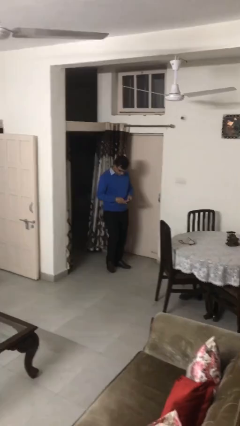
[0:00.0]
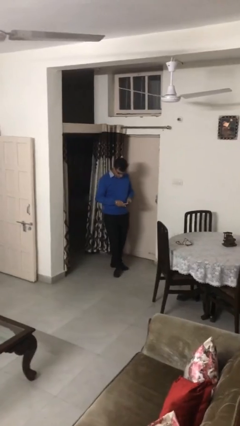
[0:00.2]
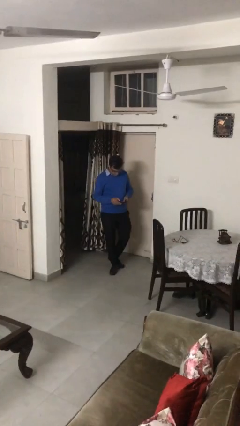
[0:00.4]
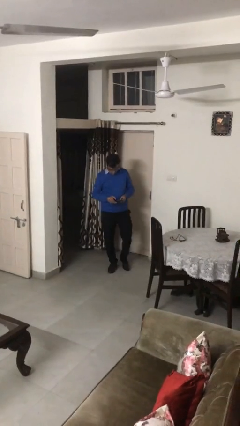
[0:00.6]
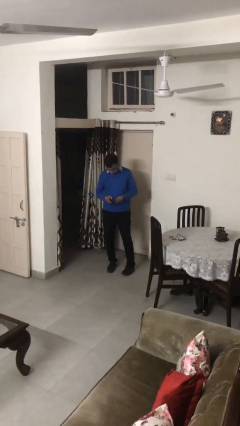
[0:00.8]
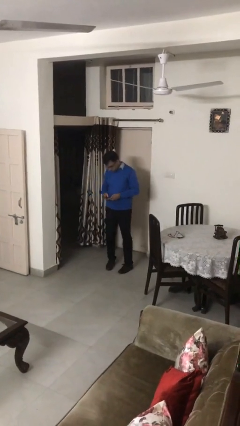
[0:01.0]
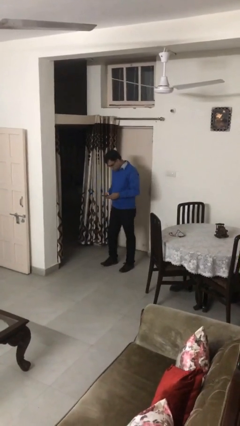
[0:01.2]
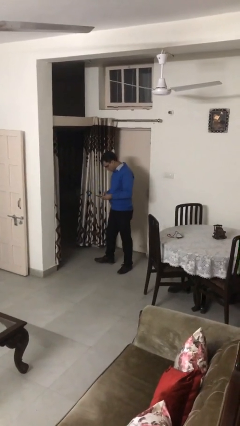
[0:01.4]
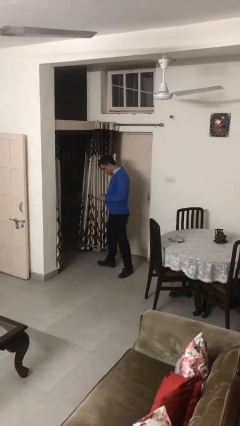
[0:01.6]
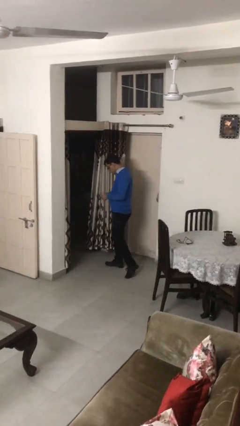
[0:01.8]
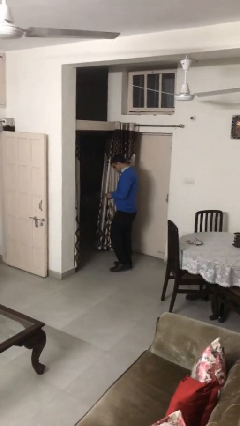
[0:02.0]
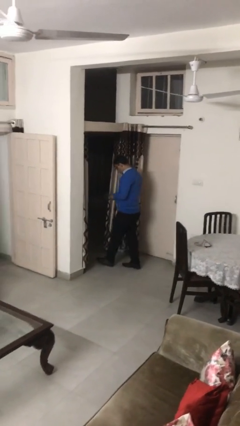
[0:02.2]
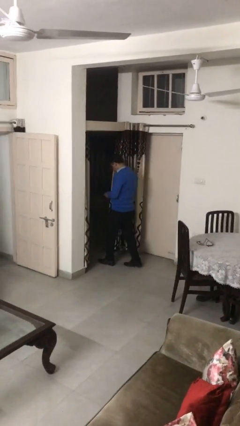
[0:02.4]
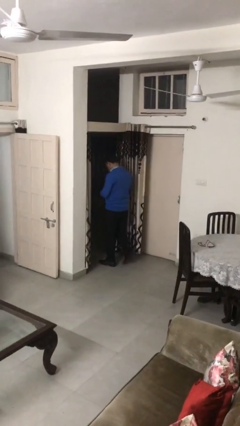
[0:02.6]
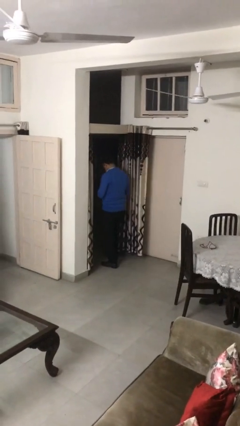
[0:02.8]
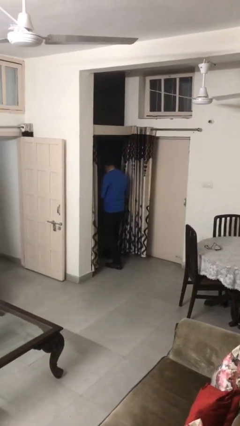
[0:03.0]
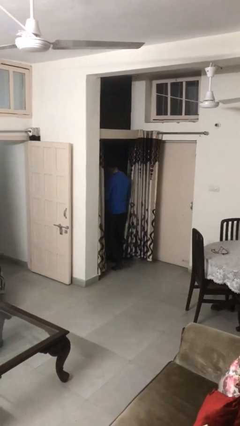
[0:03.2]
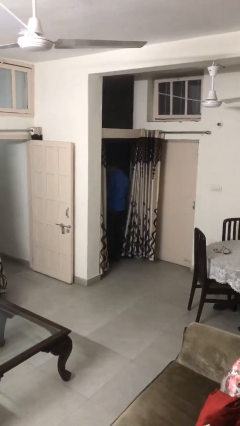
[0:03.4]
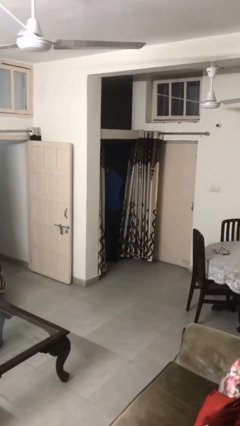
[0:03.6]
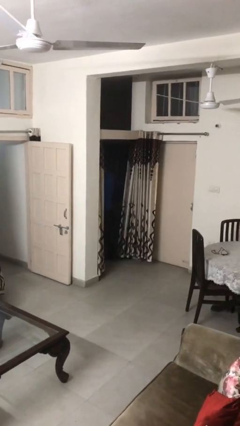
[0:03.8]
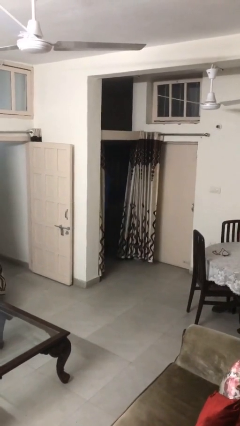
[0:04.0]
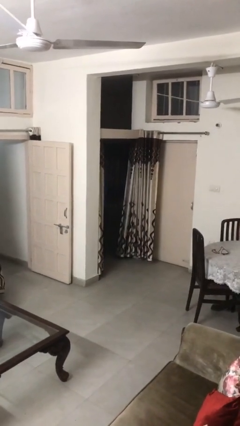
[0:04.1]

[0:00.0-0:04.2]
person exits scene through structure

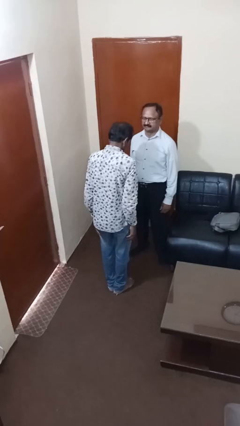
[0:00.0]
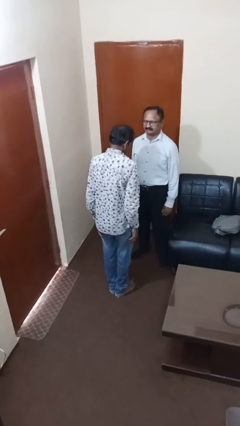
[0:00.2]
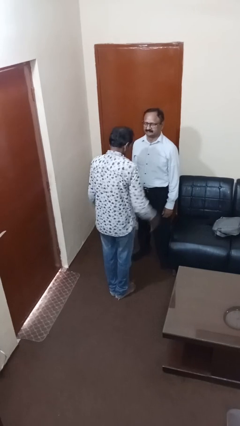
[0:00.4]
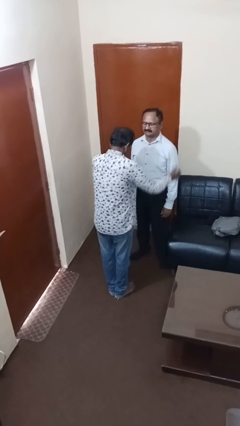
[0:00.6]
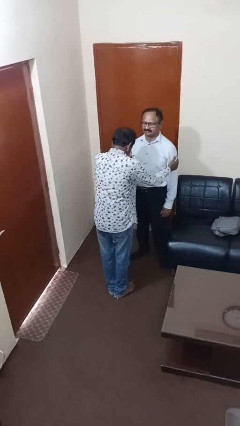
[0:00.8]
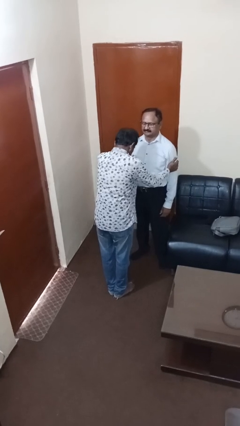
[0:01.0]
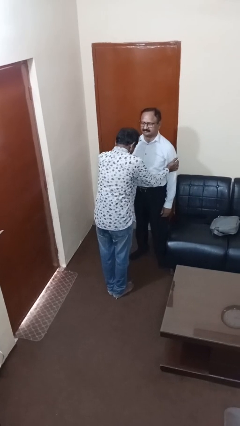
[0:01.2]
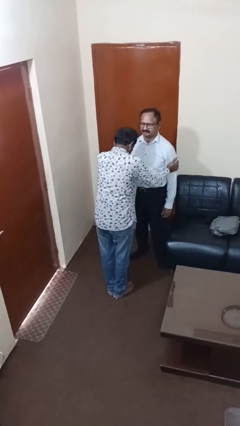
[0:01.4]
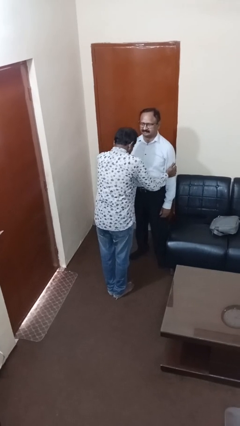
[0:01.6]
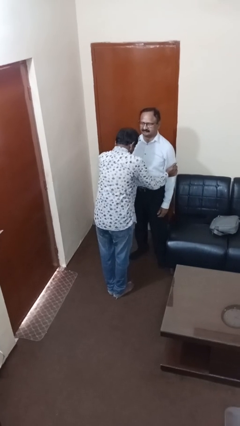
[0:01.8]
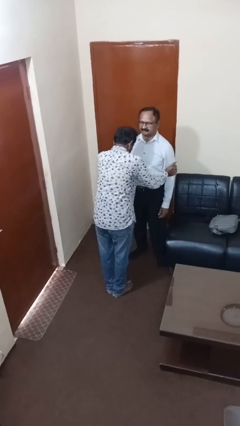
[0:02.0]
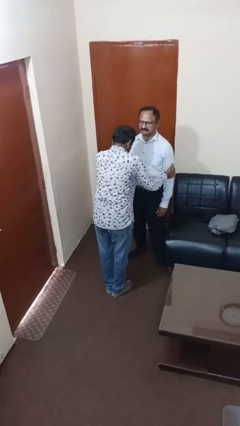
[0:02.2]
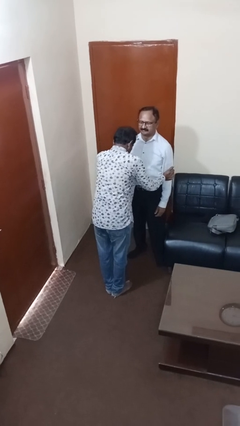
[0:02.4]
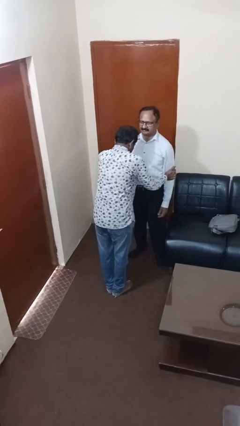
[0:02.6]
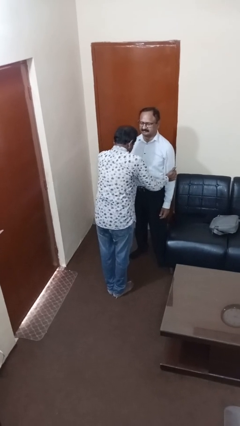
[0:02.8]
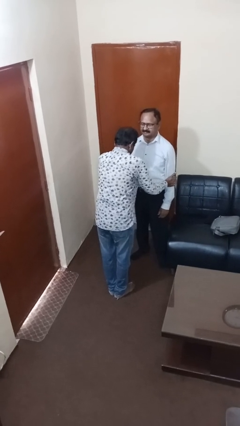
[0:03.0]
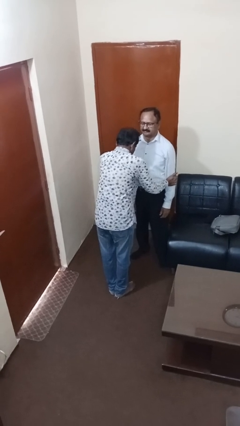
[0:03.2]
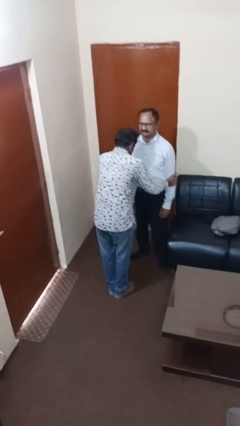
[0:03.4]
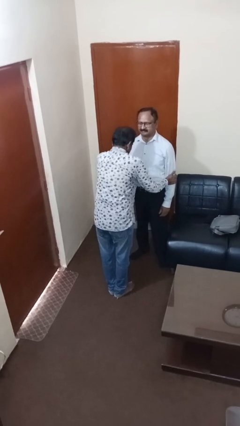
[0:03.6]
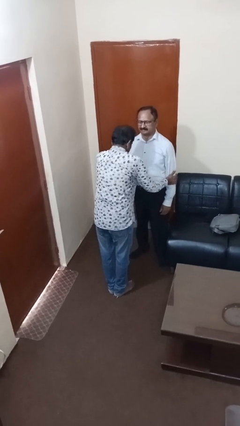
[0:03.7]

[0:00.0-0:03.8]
person grabs person by bicep

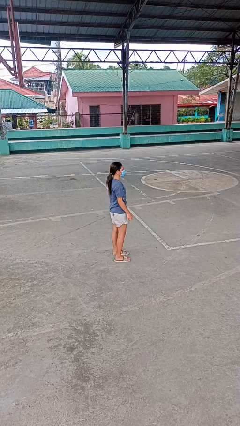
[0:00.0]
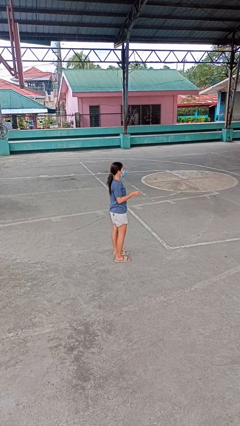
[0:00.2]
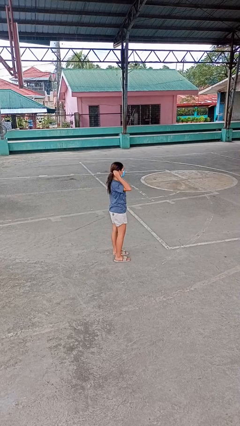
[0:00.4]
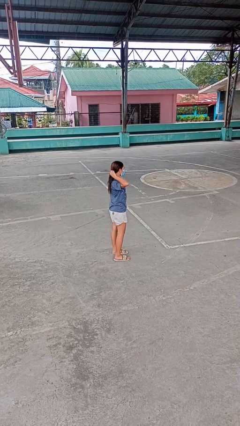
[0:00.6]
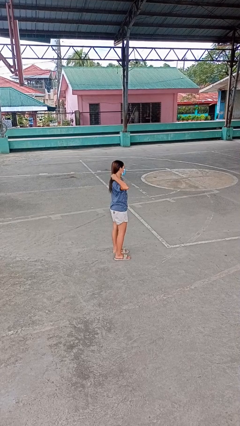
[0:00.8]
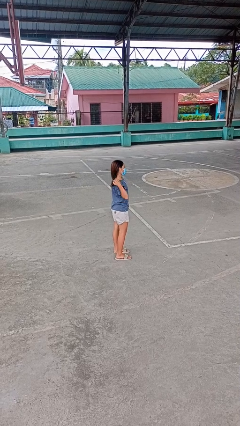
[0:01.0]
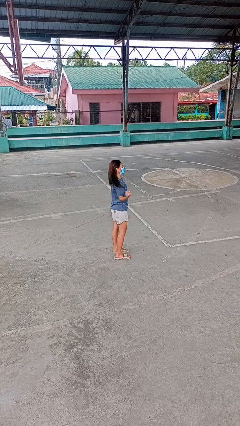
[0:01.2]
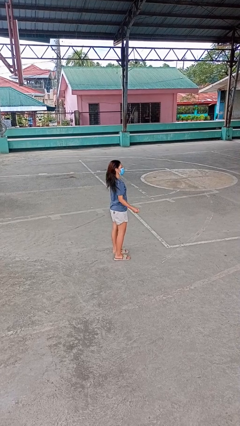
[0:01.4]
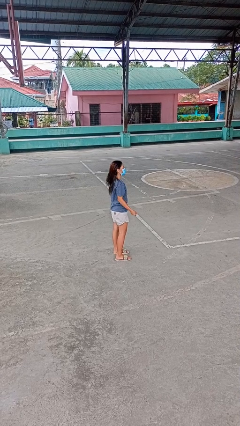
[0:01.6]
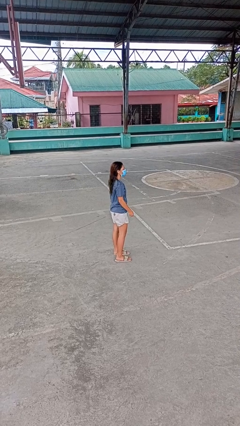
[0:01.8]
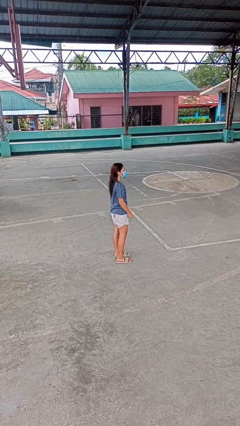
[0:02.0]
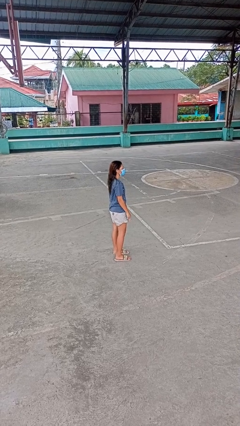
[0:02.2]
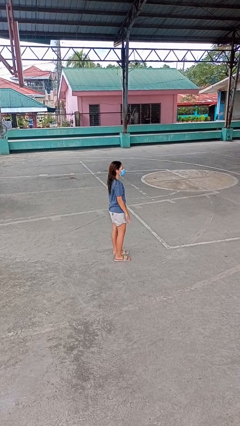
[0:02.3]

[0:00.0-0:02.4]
person takes off hairtie

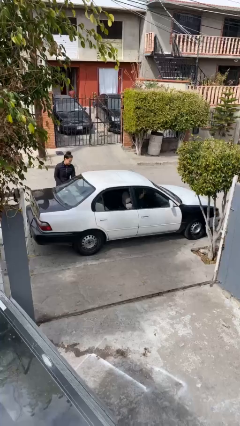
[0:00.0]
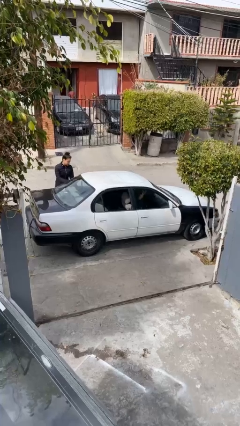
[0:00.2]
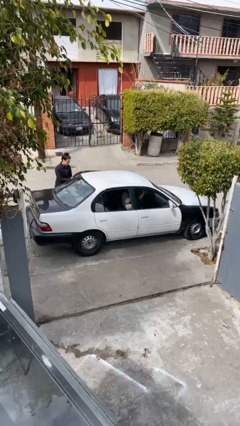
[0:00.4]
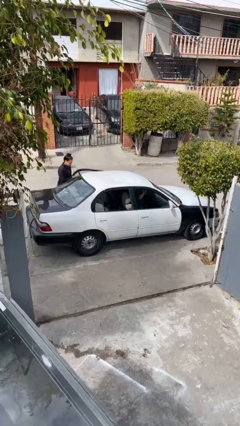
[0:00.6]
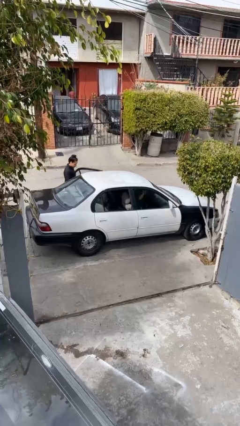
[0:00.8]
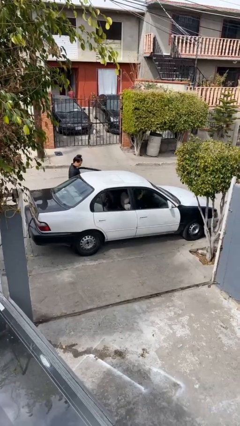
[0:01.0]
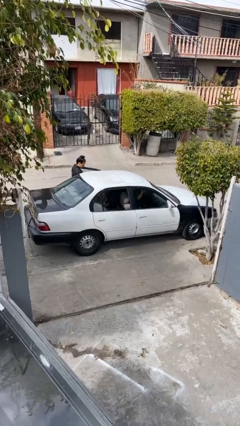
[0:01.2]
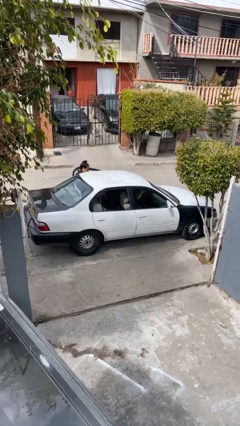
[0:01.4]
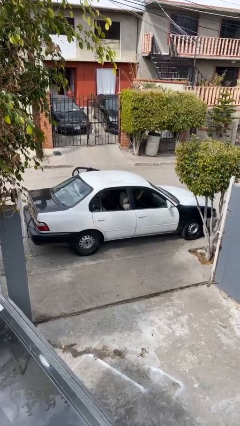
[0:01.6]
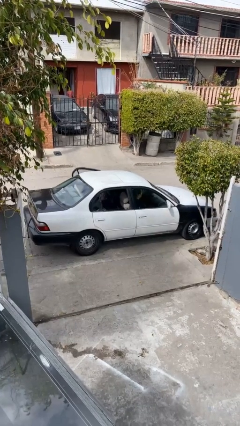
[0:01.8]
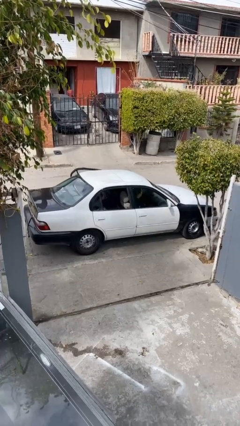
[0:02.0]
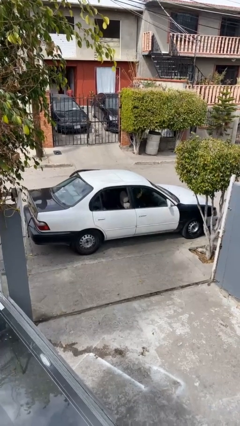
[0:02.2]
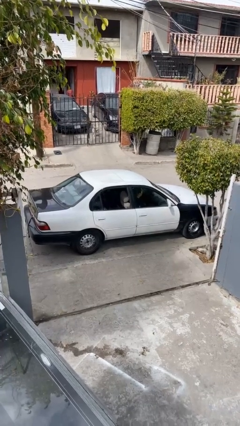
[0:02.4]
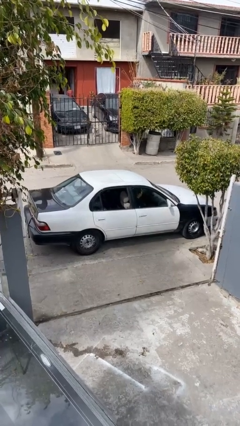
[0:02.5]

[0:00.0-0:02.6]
car picks up person

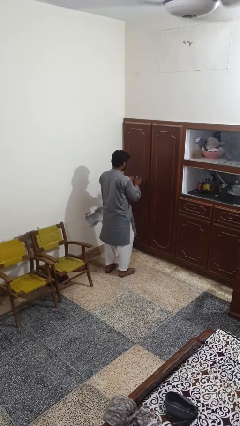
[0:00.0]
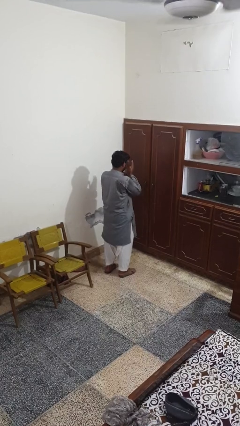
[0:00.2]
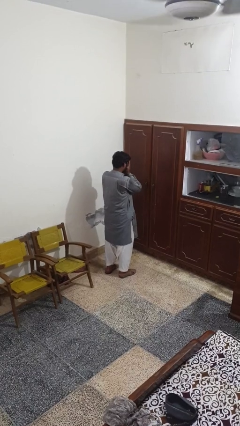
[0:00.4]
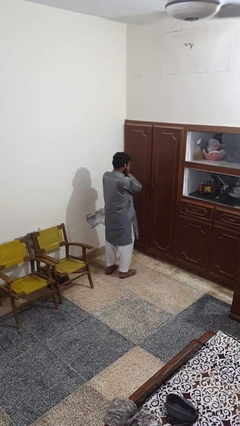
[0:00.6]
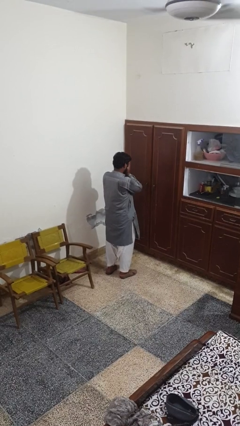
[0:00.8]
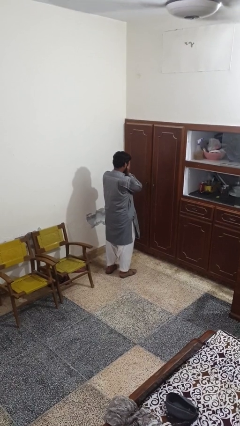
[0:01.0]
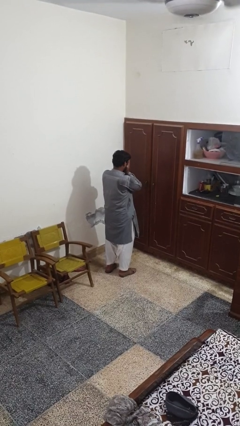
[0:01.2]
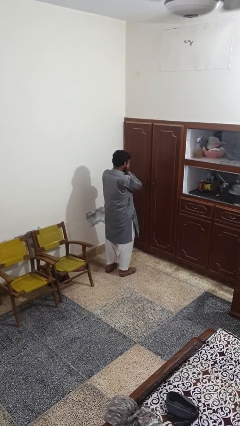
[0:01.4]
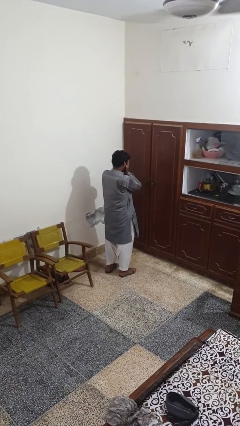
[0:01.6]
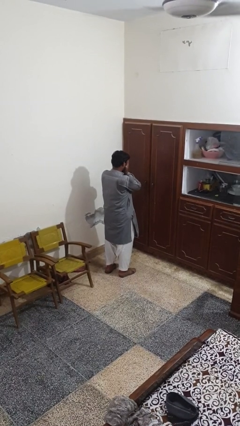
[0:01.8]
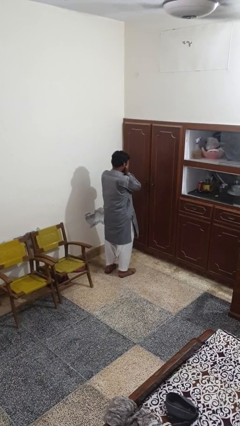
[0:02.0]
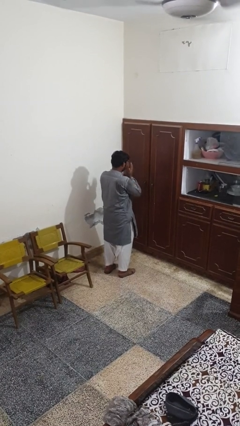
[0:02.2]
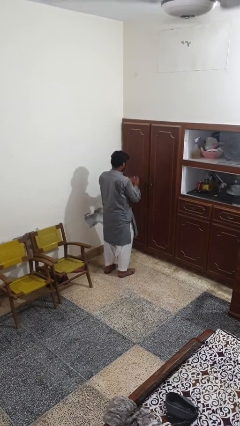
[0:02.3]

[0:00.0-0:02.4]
person covers face with hands

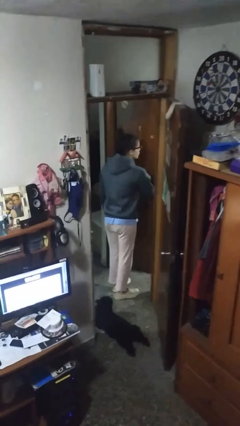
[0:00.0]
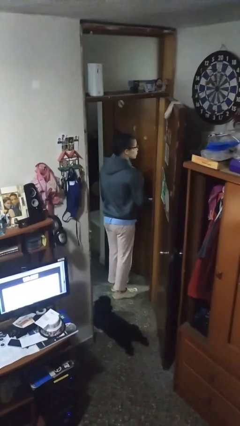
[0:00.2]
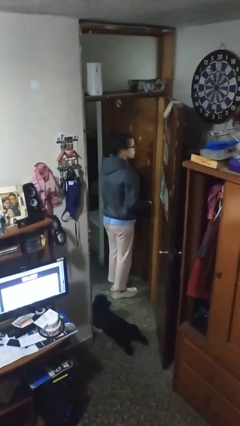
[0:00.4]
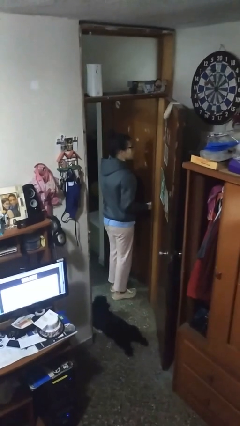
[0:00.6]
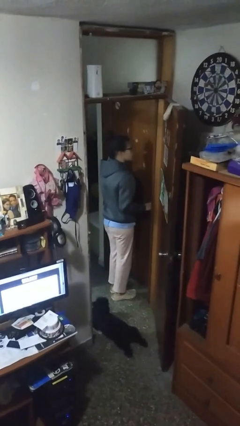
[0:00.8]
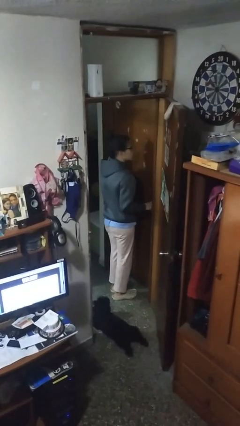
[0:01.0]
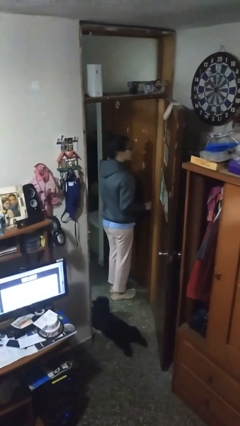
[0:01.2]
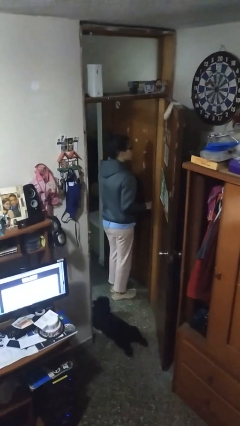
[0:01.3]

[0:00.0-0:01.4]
person closes facility door

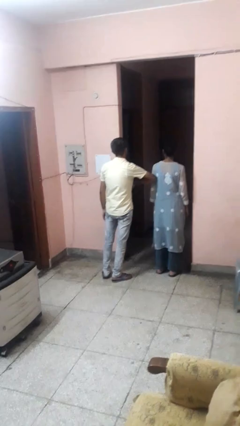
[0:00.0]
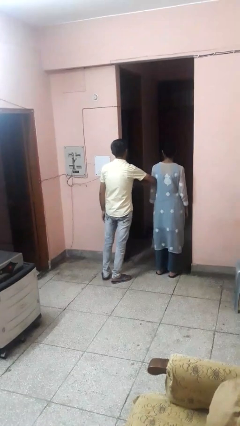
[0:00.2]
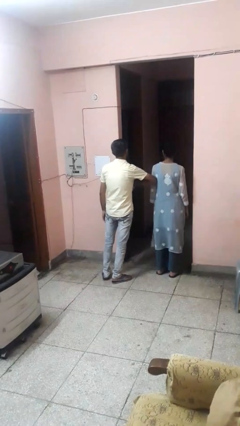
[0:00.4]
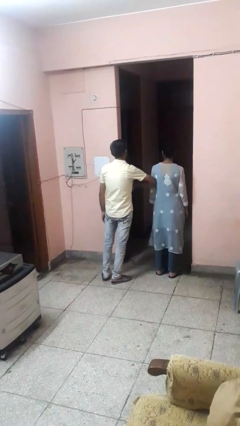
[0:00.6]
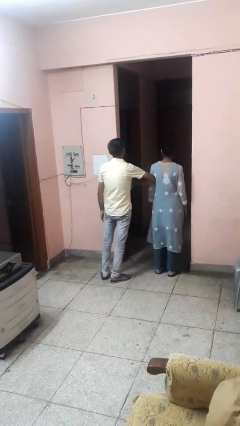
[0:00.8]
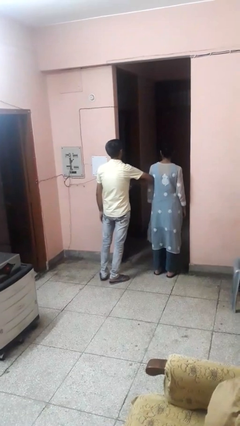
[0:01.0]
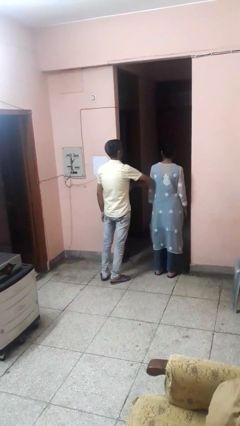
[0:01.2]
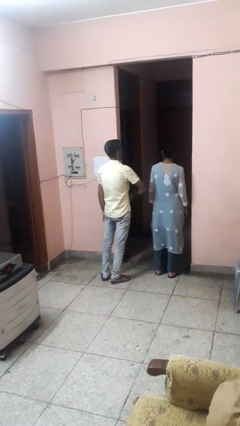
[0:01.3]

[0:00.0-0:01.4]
person nudges person with elbow
